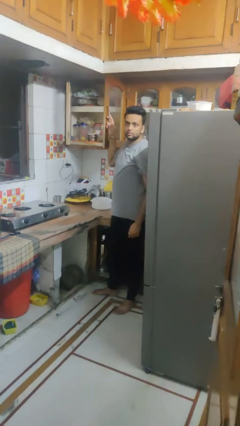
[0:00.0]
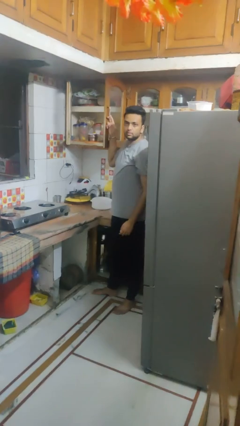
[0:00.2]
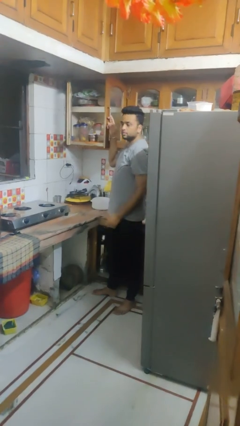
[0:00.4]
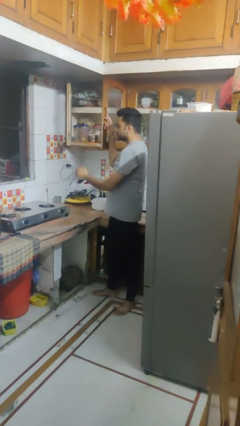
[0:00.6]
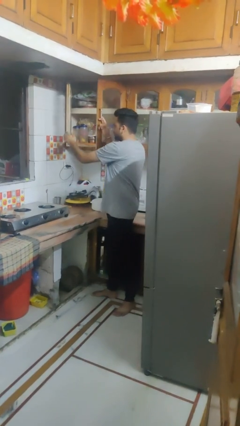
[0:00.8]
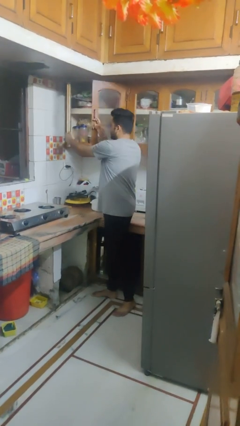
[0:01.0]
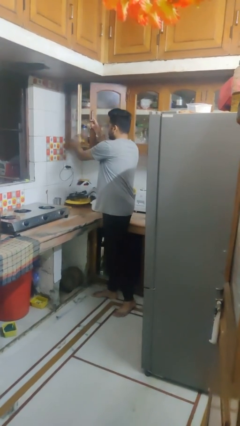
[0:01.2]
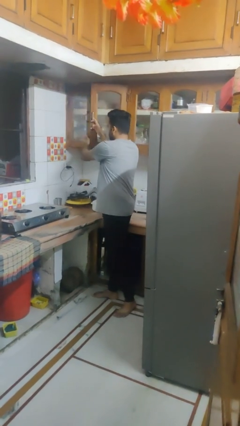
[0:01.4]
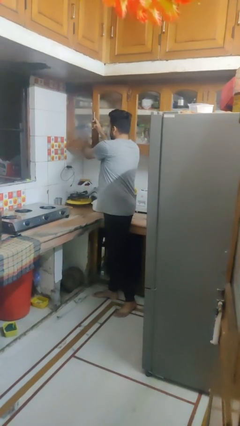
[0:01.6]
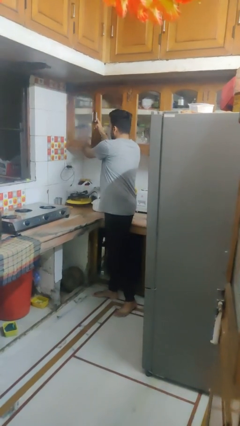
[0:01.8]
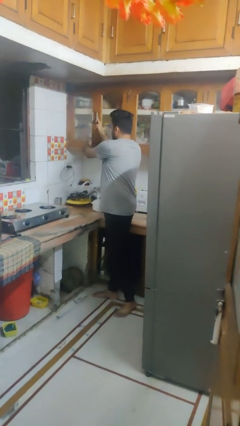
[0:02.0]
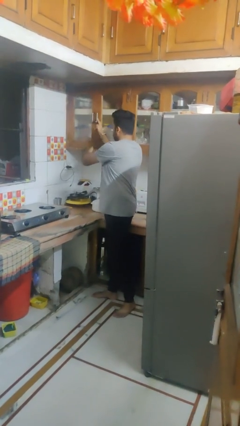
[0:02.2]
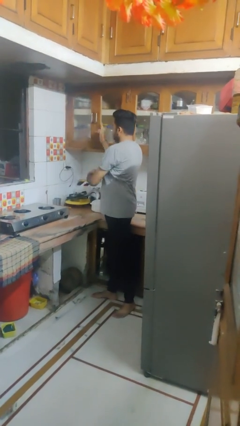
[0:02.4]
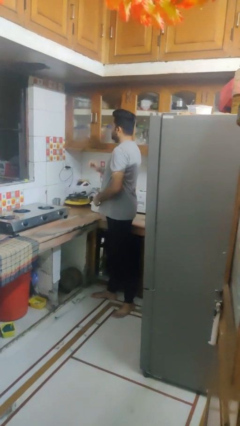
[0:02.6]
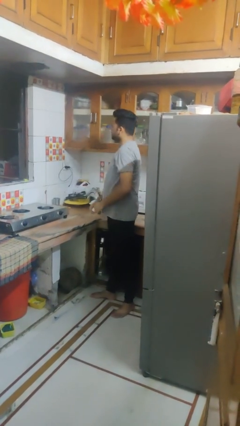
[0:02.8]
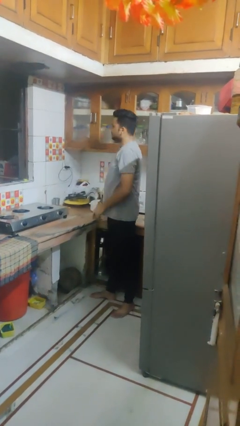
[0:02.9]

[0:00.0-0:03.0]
person closes cabinet

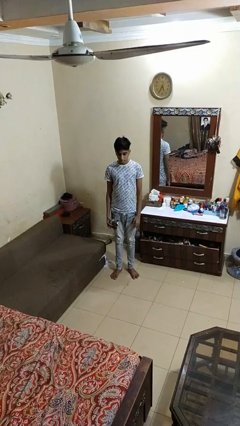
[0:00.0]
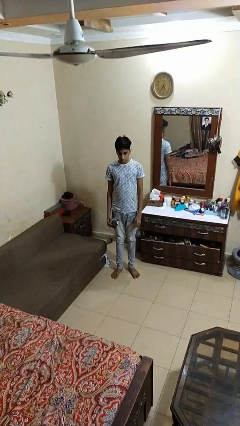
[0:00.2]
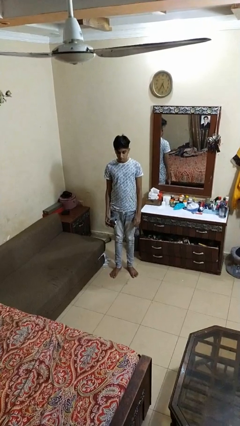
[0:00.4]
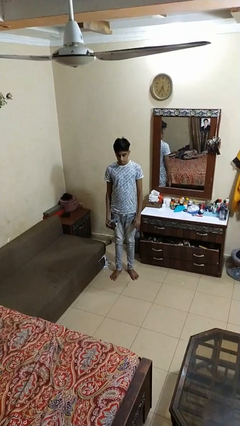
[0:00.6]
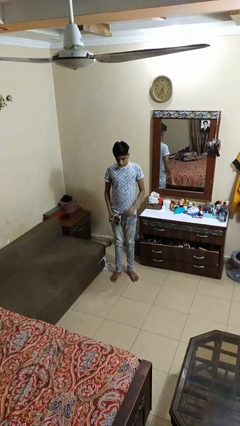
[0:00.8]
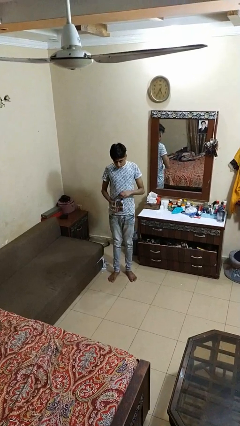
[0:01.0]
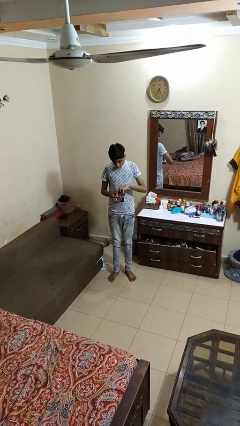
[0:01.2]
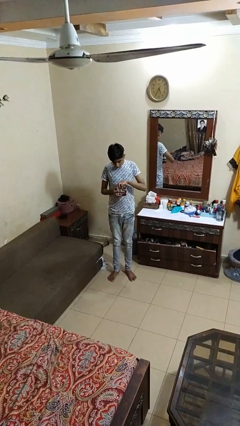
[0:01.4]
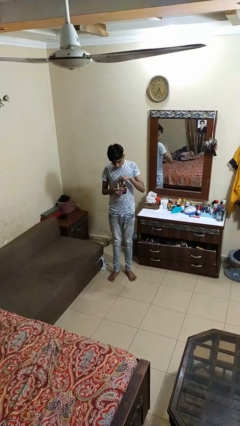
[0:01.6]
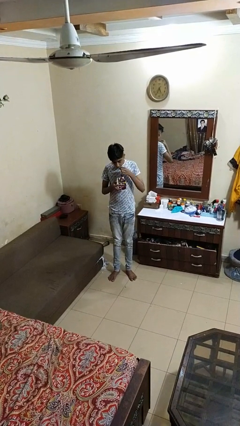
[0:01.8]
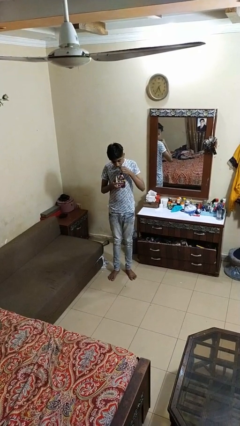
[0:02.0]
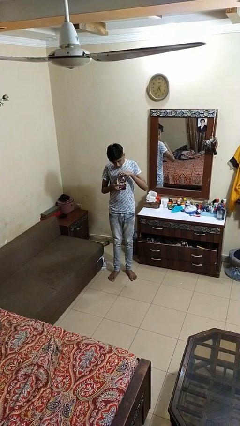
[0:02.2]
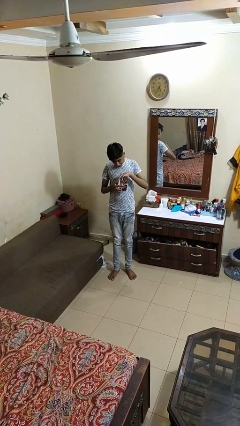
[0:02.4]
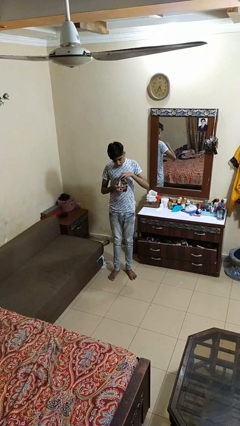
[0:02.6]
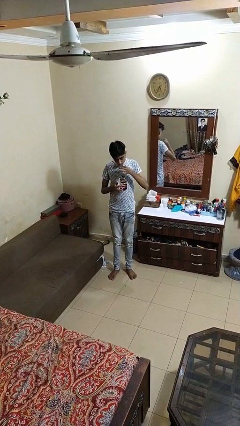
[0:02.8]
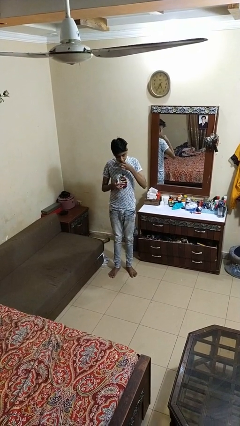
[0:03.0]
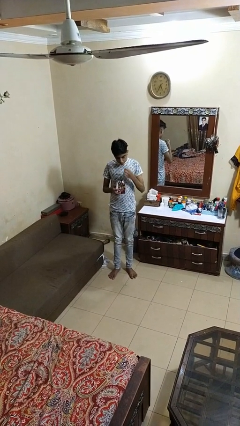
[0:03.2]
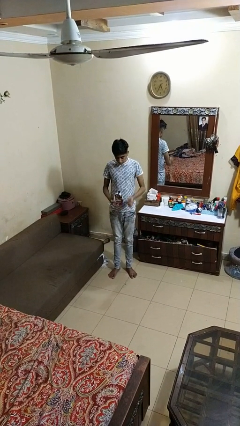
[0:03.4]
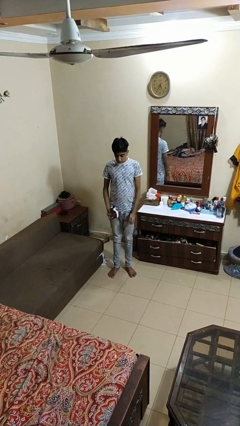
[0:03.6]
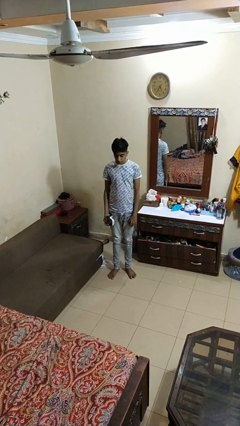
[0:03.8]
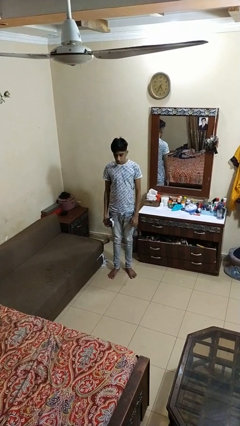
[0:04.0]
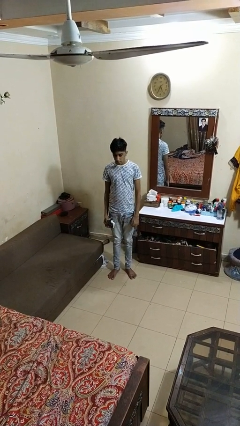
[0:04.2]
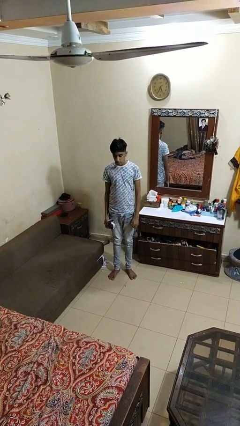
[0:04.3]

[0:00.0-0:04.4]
person eats snack from bag

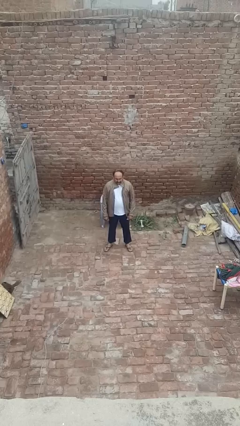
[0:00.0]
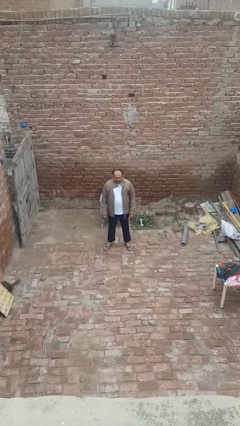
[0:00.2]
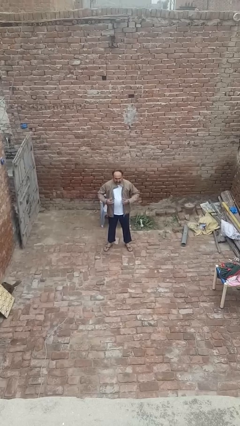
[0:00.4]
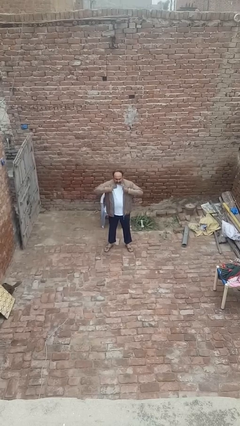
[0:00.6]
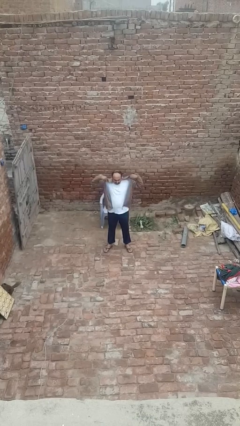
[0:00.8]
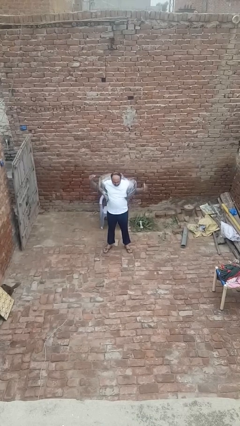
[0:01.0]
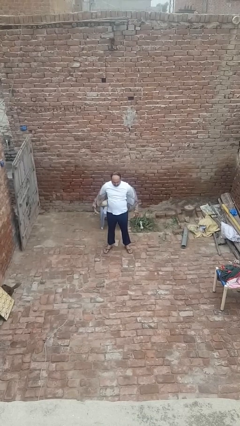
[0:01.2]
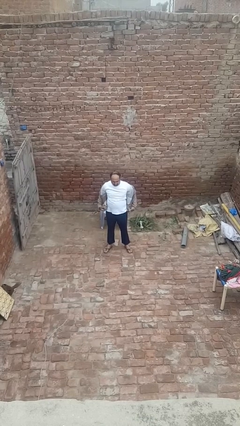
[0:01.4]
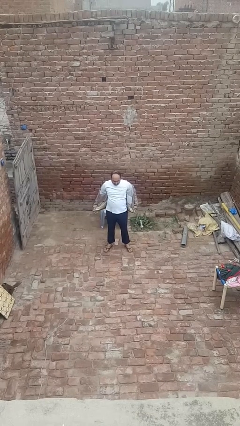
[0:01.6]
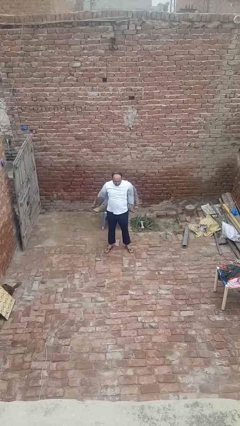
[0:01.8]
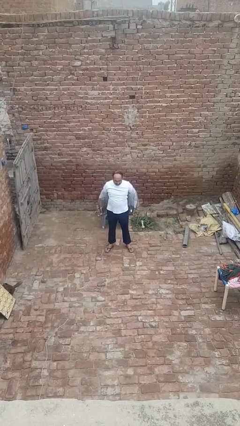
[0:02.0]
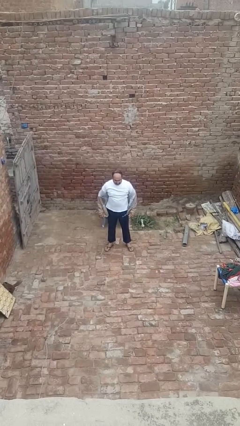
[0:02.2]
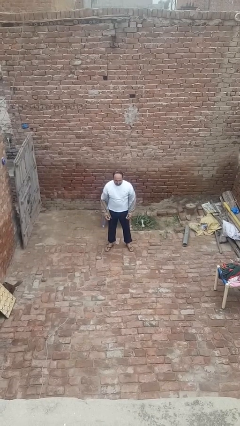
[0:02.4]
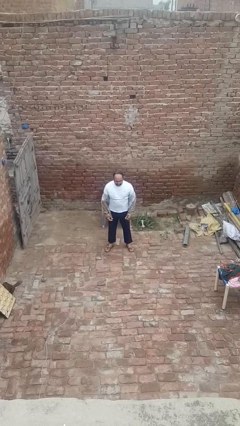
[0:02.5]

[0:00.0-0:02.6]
person takes off jacket

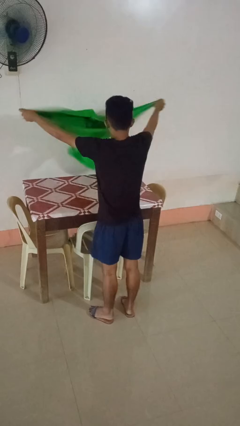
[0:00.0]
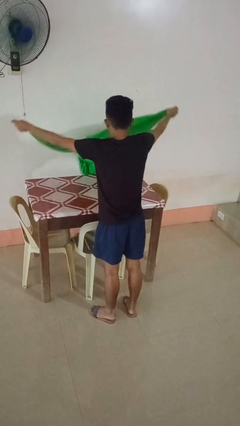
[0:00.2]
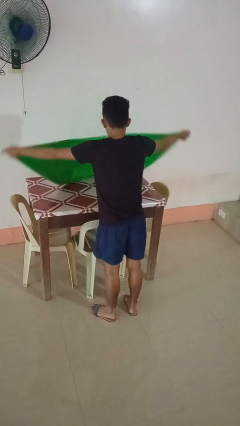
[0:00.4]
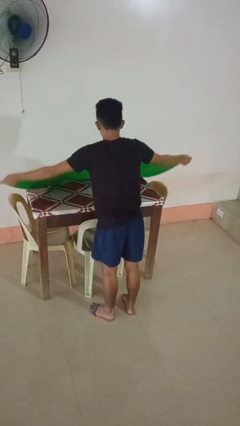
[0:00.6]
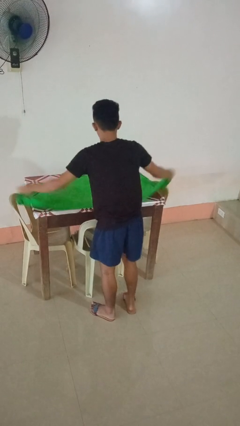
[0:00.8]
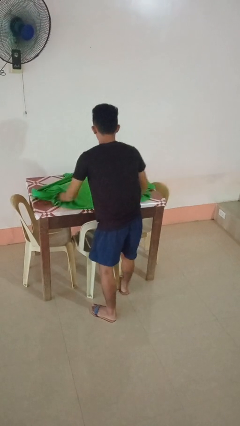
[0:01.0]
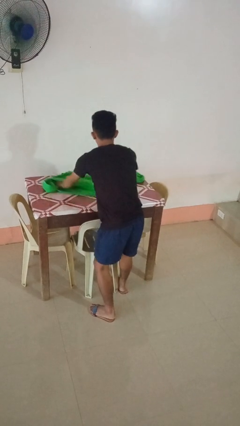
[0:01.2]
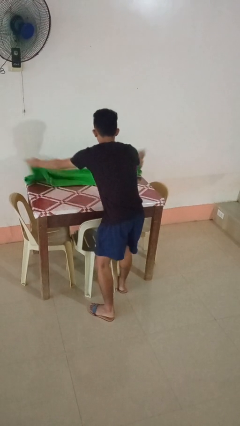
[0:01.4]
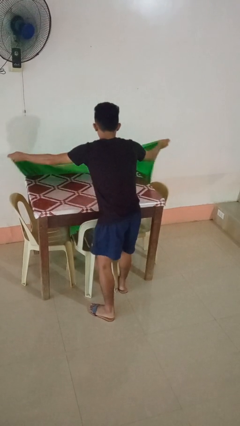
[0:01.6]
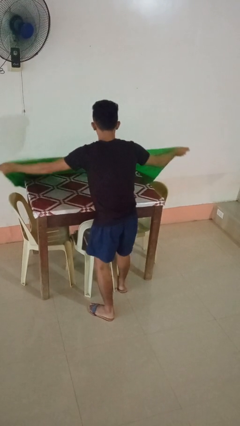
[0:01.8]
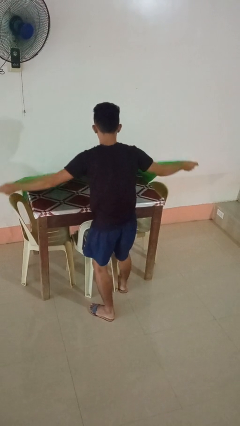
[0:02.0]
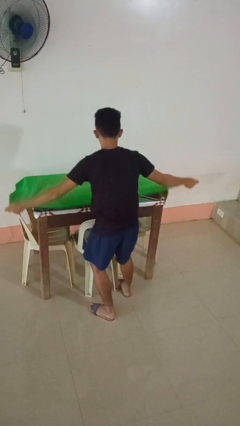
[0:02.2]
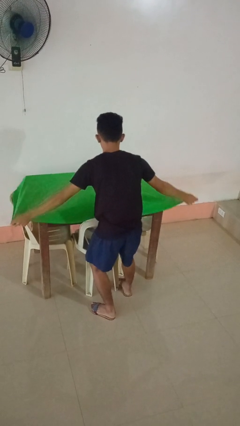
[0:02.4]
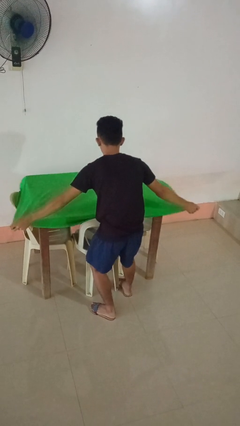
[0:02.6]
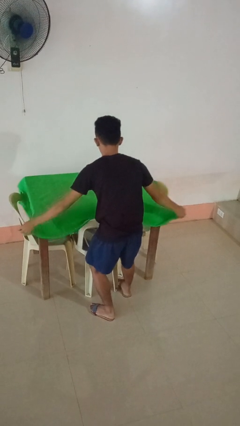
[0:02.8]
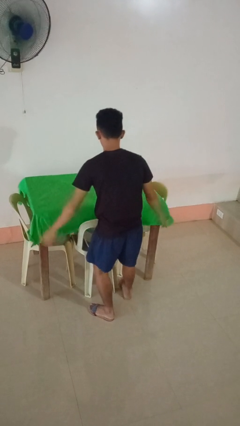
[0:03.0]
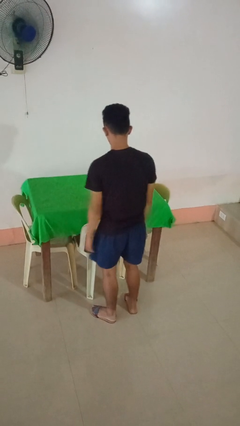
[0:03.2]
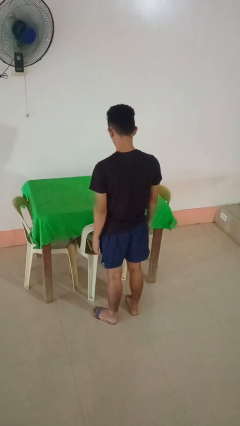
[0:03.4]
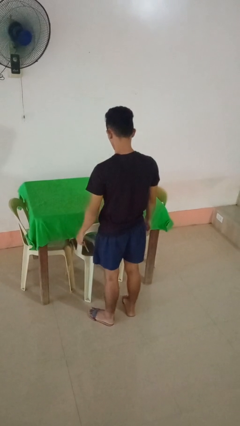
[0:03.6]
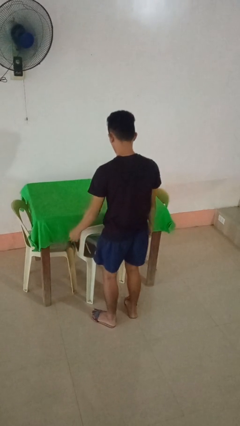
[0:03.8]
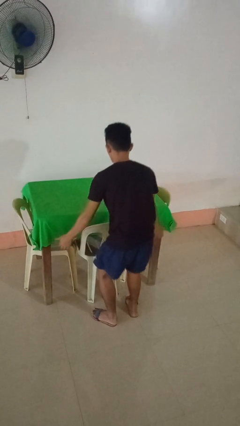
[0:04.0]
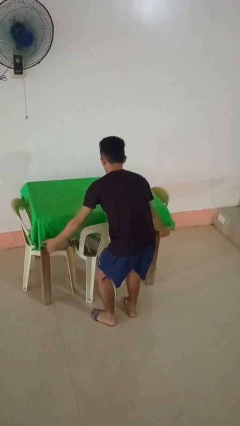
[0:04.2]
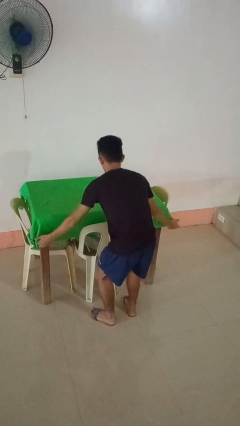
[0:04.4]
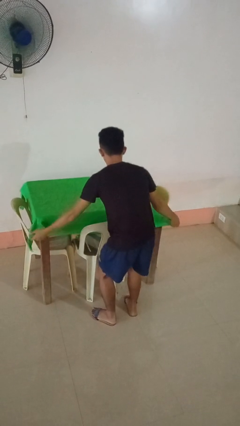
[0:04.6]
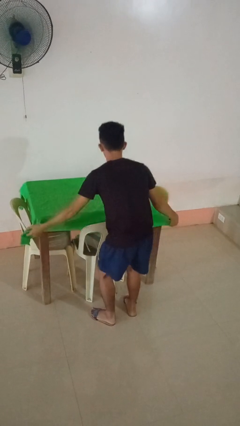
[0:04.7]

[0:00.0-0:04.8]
person spreads tablecloth

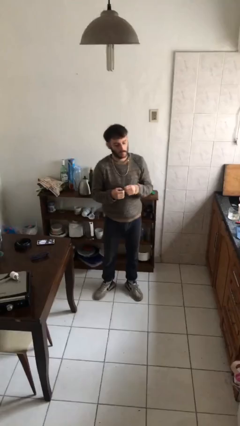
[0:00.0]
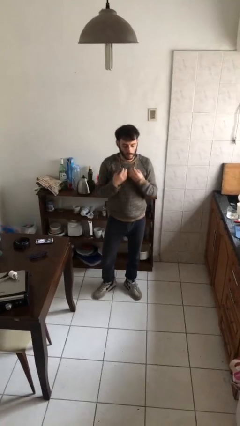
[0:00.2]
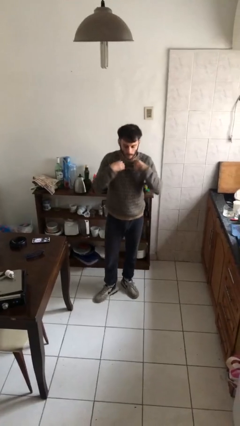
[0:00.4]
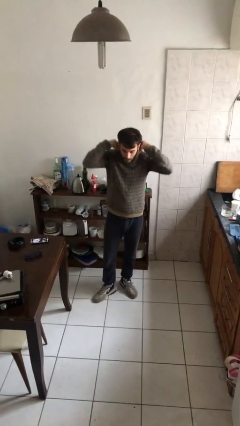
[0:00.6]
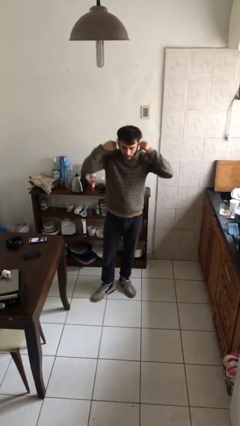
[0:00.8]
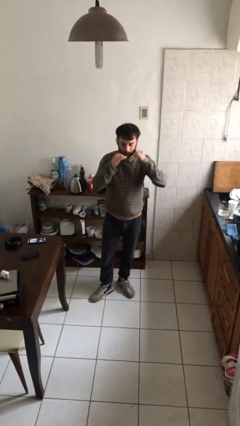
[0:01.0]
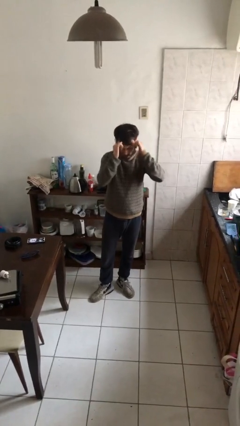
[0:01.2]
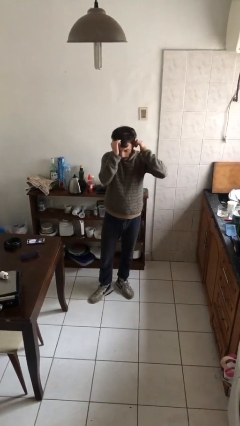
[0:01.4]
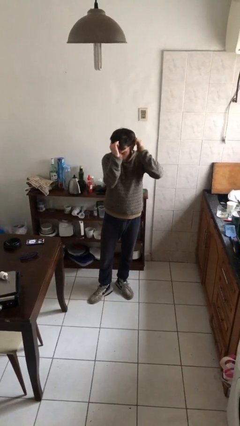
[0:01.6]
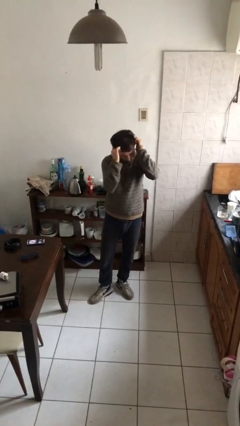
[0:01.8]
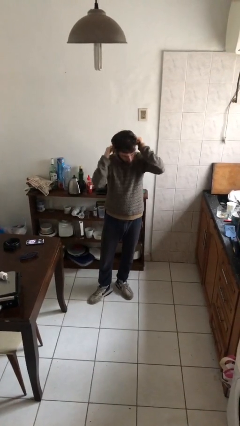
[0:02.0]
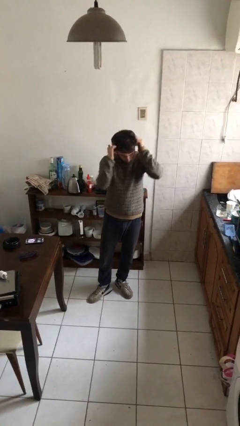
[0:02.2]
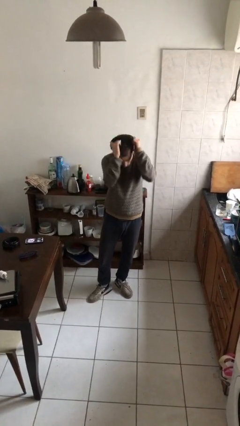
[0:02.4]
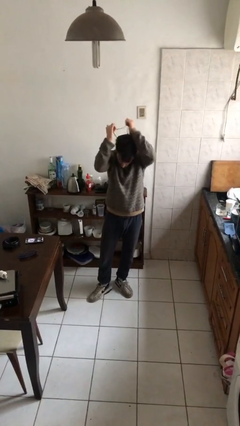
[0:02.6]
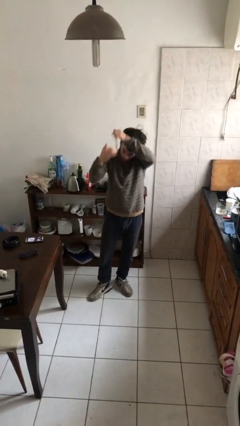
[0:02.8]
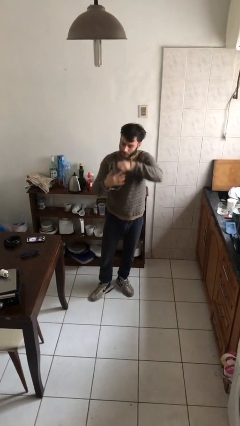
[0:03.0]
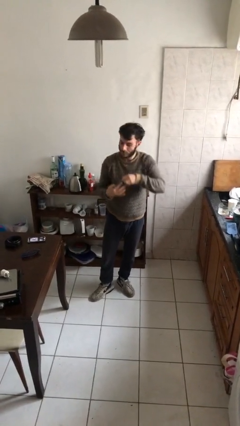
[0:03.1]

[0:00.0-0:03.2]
person takes off necklace
